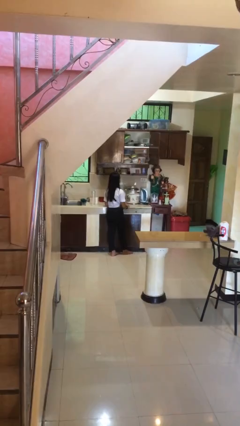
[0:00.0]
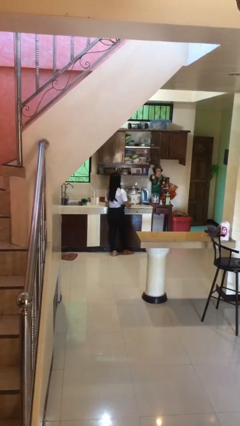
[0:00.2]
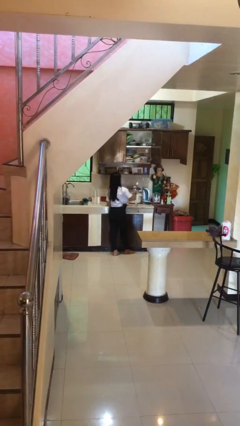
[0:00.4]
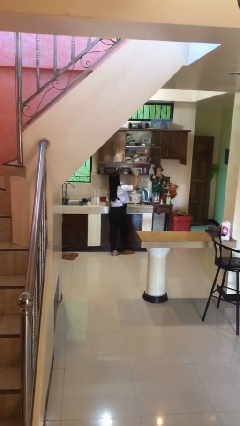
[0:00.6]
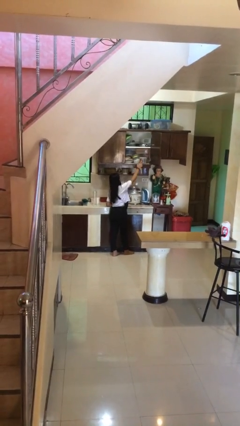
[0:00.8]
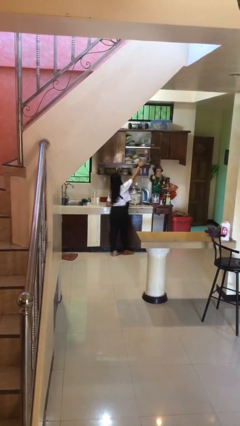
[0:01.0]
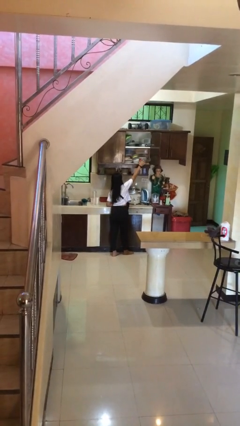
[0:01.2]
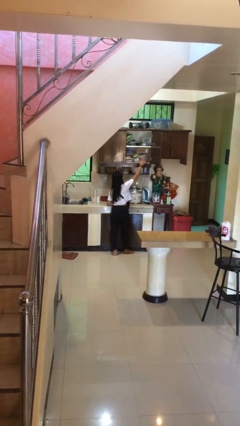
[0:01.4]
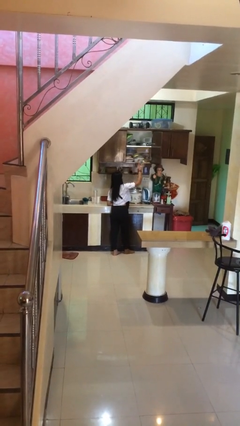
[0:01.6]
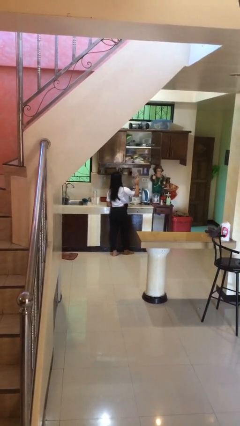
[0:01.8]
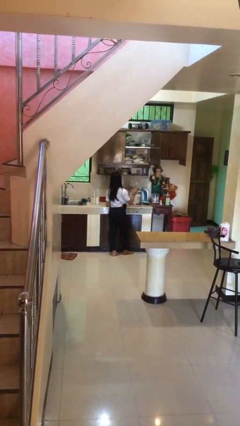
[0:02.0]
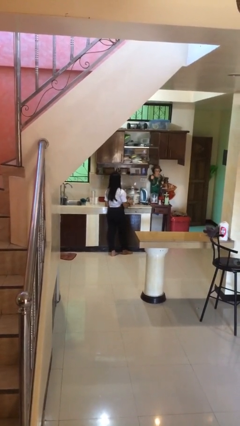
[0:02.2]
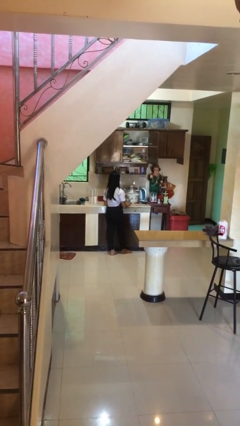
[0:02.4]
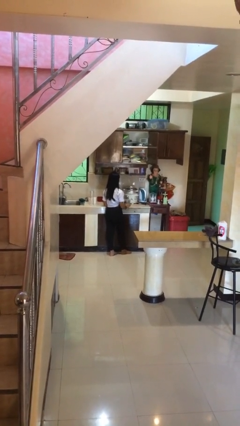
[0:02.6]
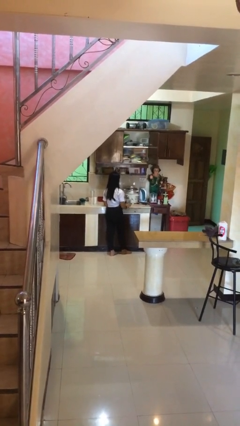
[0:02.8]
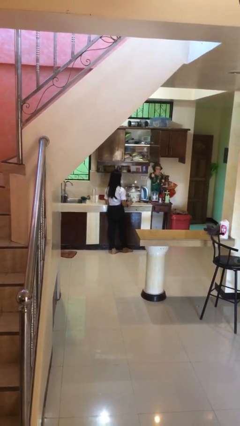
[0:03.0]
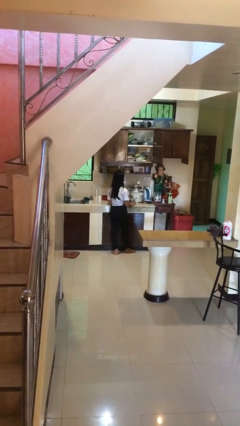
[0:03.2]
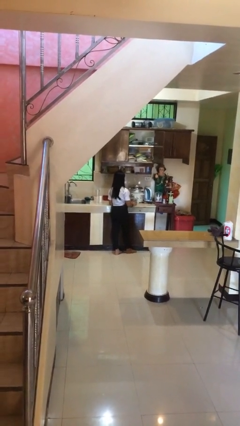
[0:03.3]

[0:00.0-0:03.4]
person picks up object from shelf

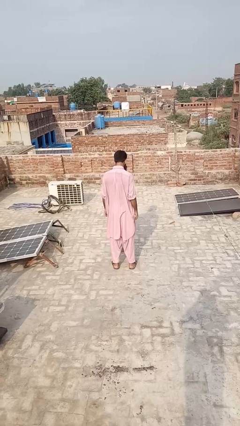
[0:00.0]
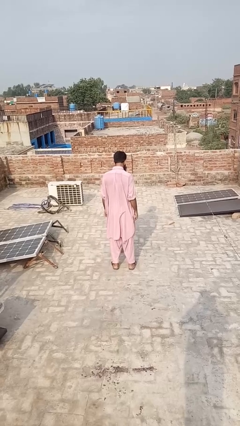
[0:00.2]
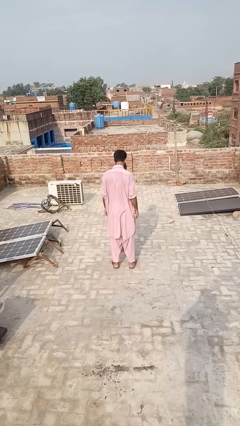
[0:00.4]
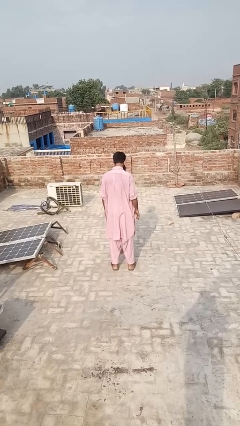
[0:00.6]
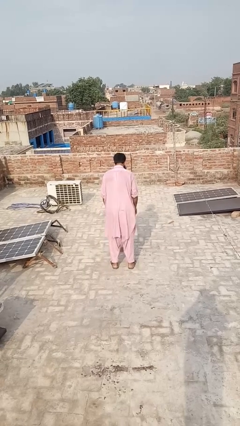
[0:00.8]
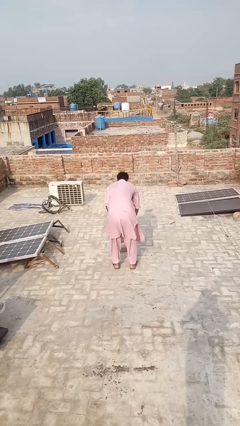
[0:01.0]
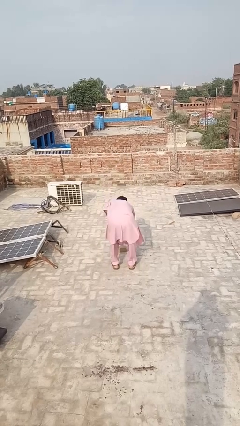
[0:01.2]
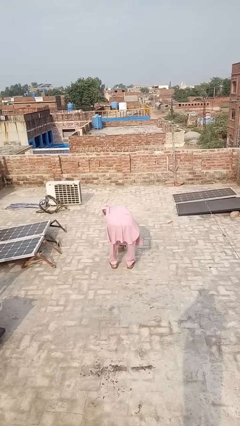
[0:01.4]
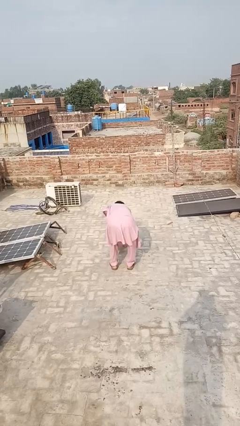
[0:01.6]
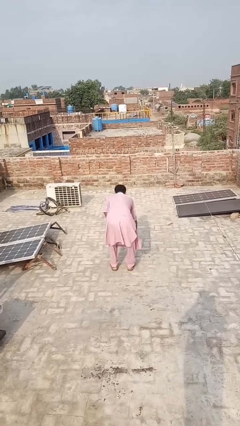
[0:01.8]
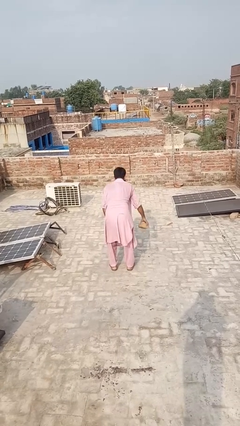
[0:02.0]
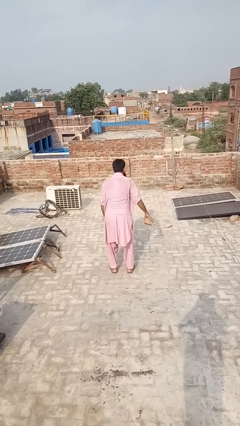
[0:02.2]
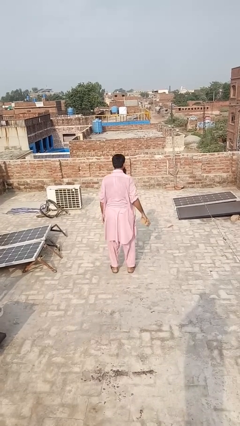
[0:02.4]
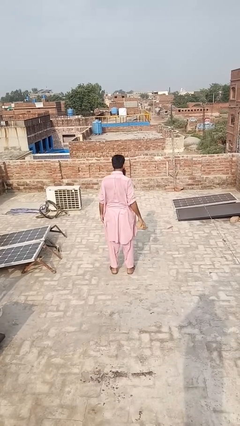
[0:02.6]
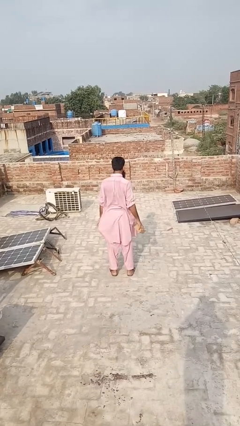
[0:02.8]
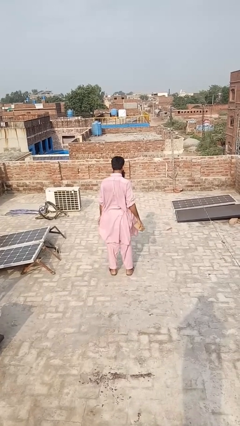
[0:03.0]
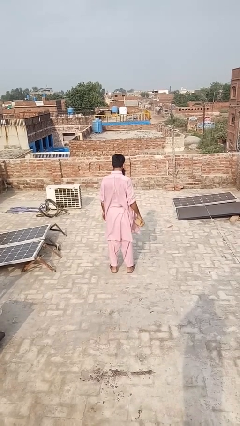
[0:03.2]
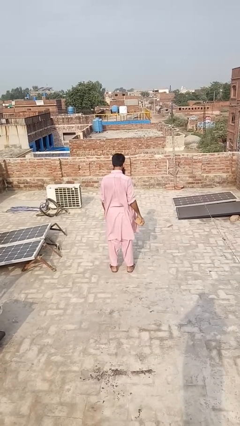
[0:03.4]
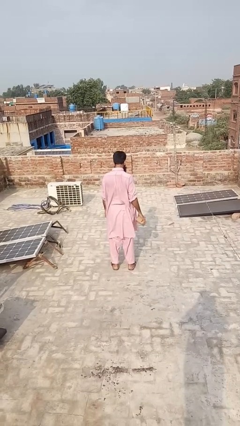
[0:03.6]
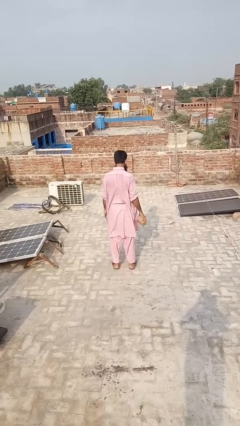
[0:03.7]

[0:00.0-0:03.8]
person picks up object from floor

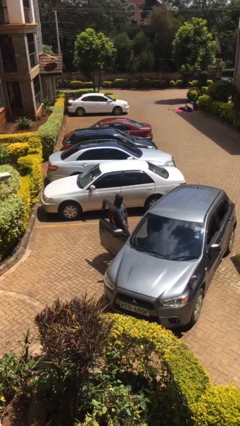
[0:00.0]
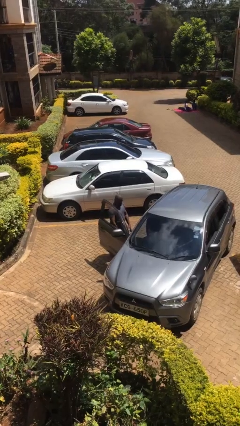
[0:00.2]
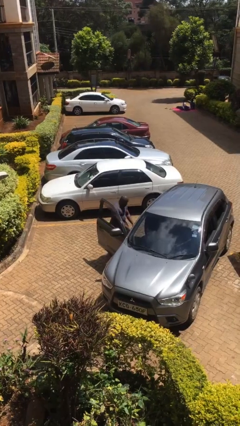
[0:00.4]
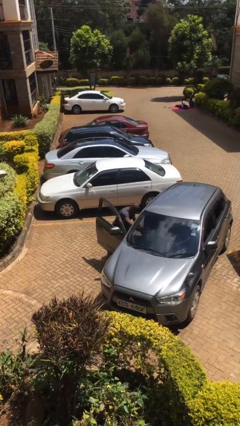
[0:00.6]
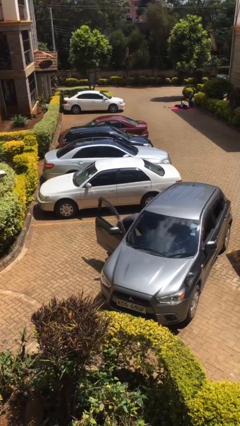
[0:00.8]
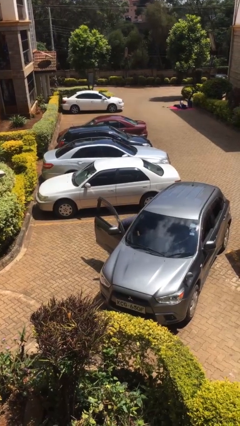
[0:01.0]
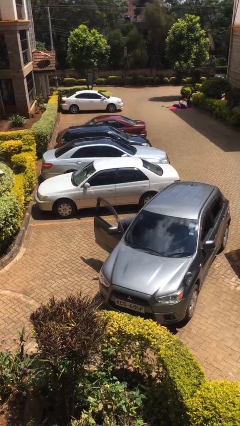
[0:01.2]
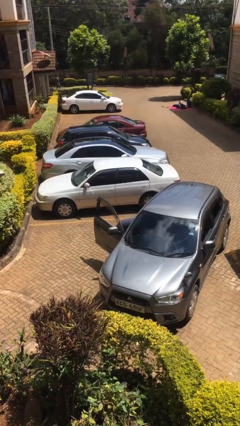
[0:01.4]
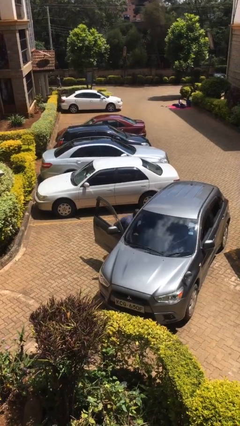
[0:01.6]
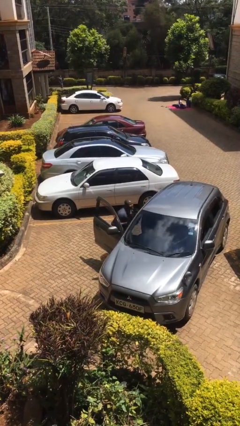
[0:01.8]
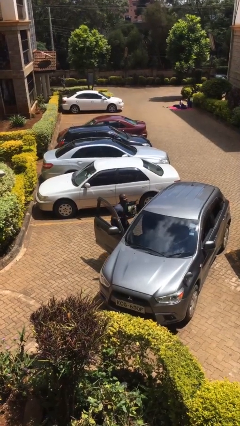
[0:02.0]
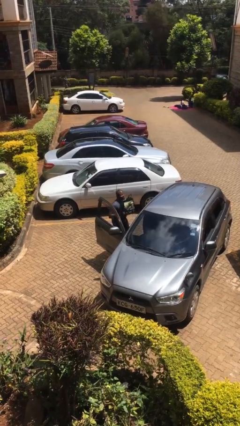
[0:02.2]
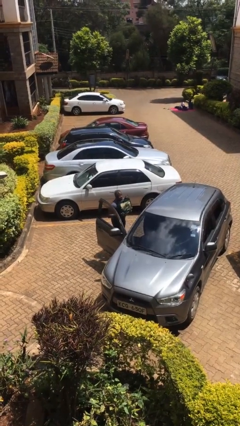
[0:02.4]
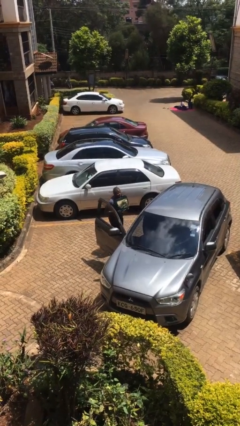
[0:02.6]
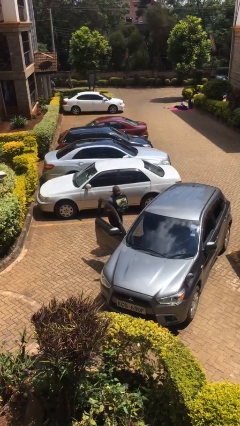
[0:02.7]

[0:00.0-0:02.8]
person unloads car

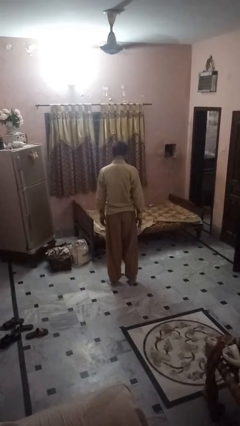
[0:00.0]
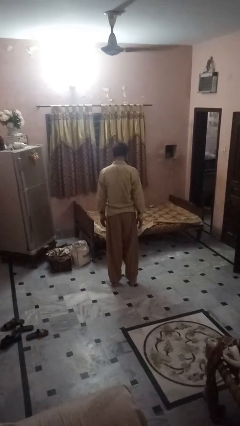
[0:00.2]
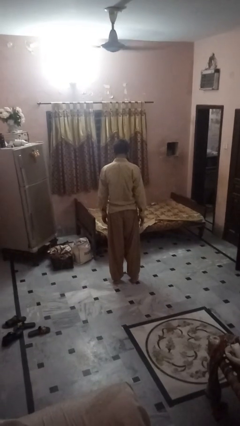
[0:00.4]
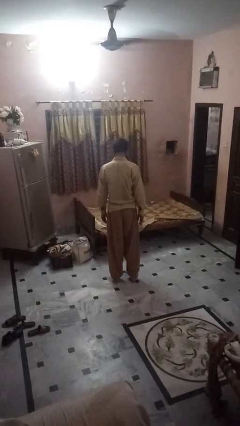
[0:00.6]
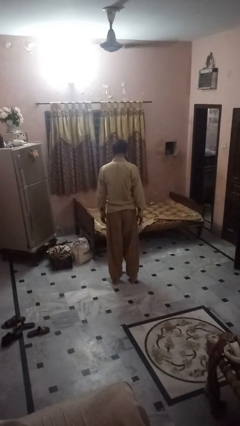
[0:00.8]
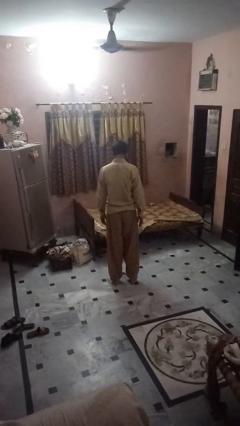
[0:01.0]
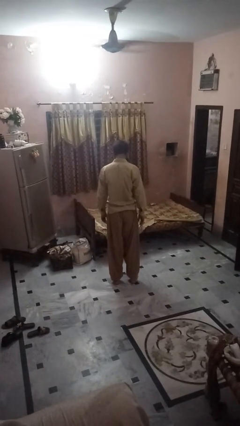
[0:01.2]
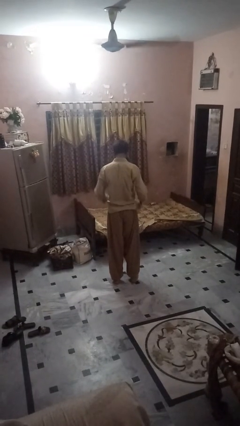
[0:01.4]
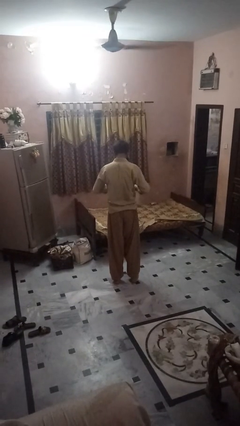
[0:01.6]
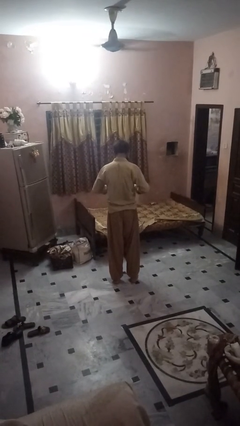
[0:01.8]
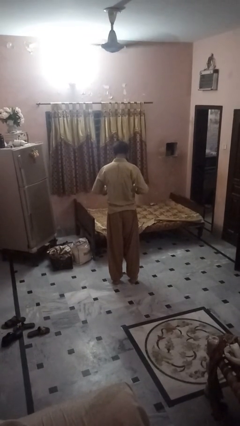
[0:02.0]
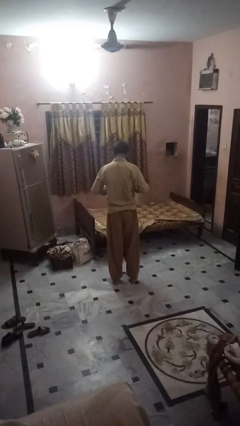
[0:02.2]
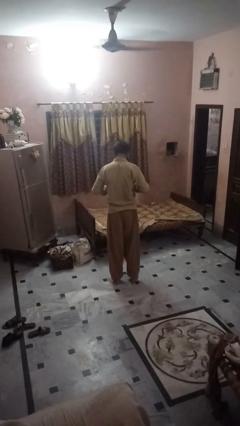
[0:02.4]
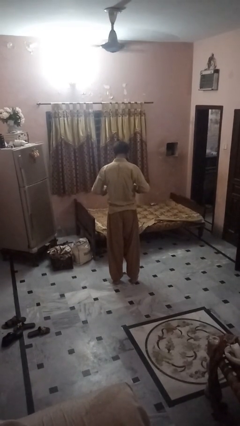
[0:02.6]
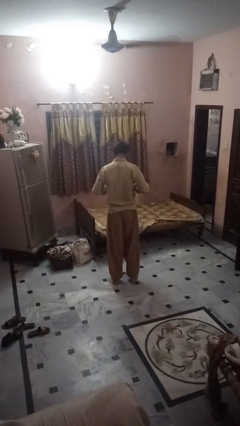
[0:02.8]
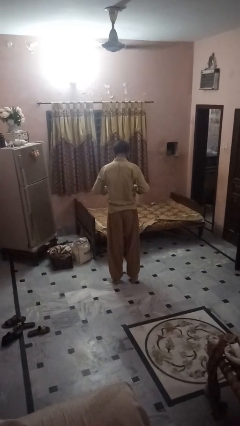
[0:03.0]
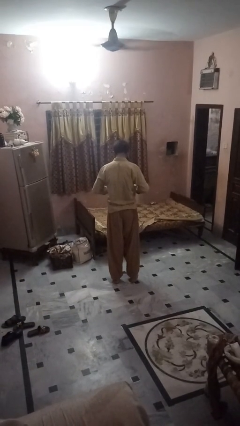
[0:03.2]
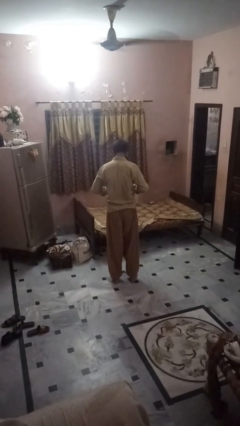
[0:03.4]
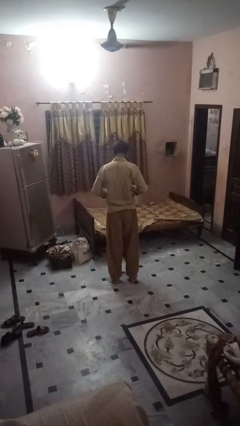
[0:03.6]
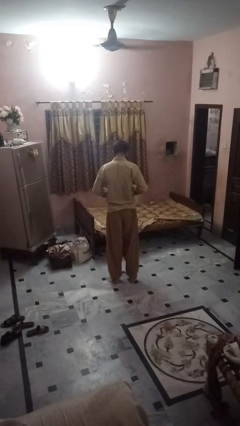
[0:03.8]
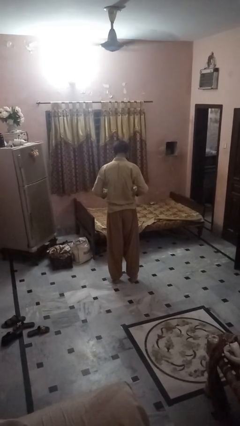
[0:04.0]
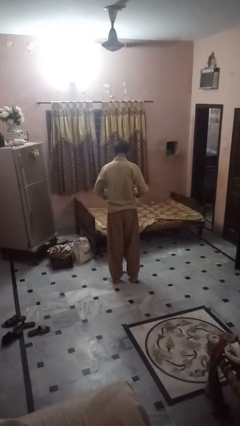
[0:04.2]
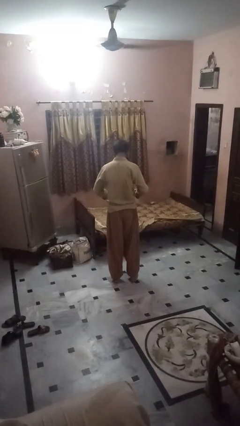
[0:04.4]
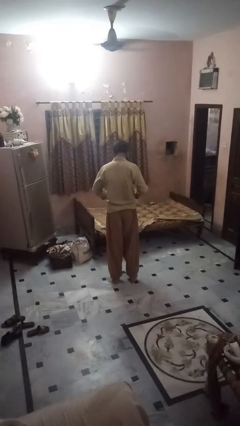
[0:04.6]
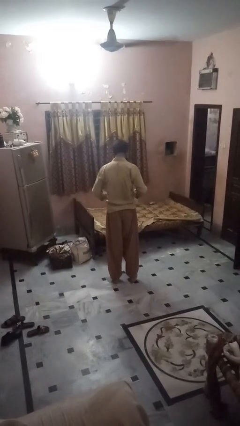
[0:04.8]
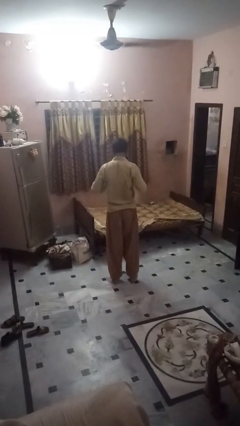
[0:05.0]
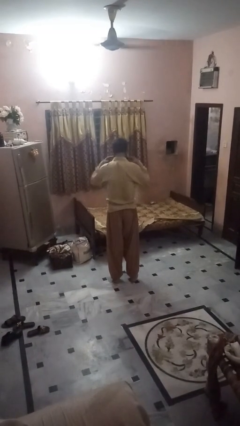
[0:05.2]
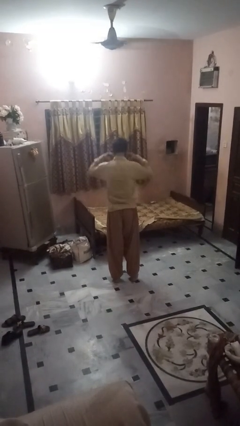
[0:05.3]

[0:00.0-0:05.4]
person unbuttons shirt

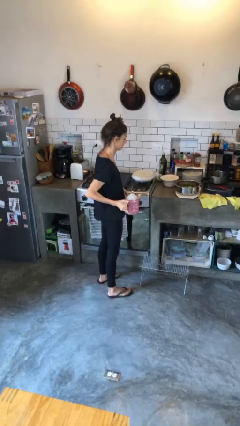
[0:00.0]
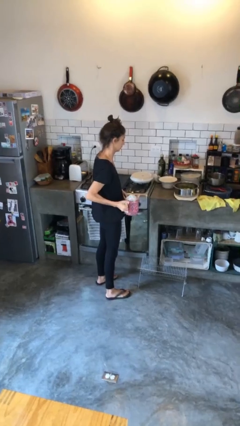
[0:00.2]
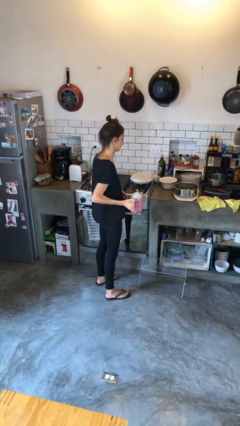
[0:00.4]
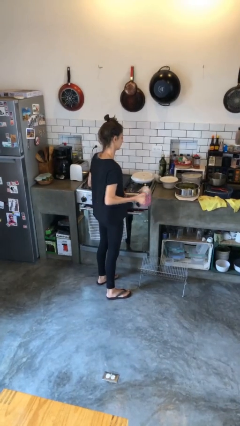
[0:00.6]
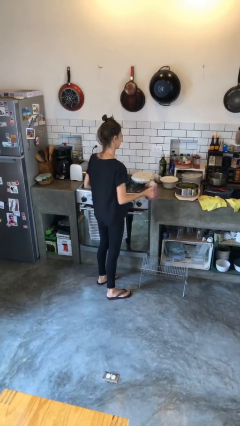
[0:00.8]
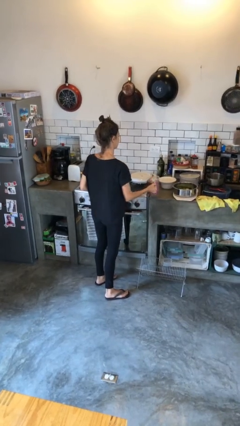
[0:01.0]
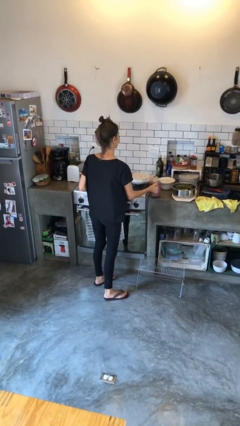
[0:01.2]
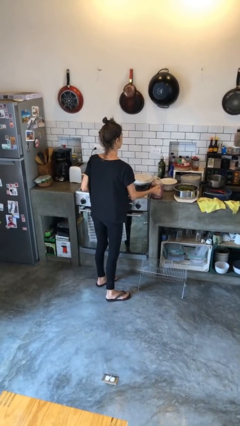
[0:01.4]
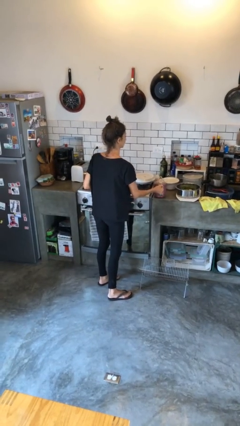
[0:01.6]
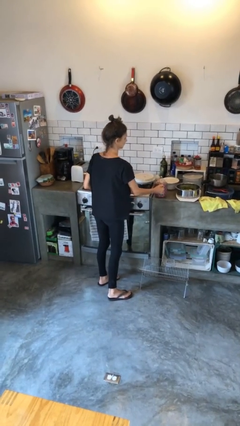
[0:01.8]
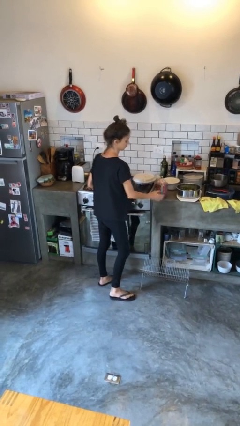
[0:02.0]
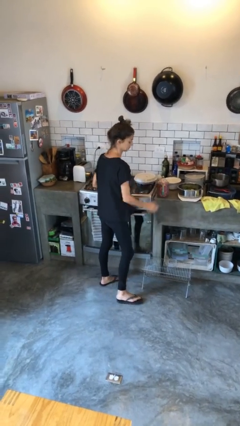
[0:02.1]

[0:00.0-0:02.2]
person puts down object on countertop

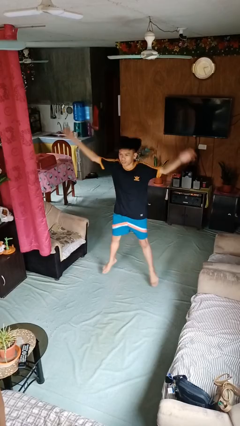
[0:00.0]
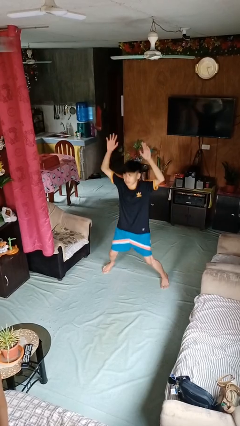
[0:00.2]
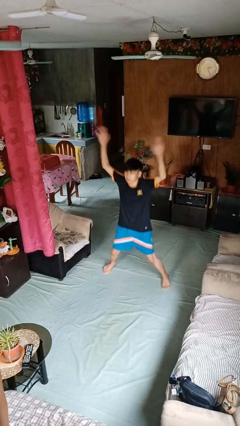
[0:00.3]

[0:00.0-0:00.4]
person exercises with jumping jacks
